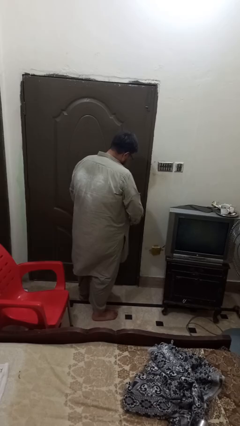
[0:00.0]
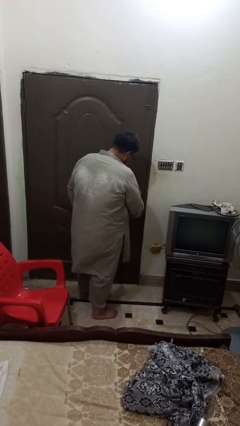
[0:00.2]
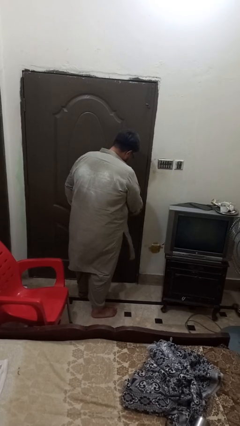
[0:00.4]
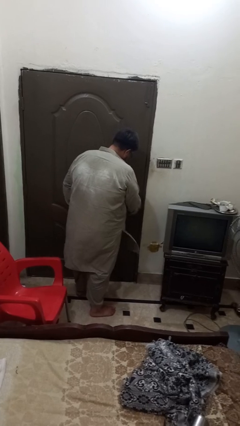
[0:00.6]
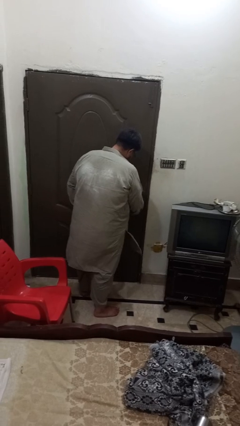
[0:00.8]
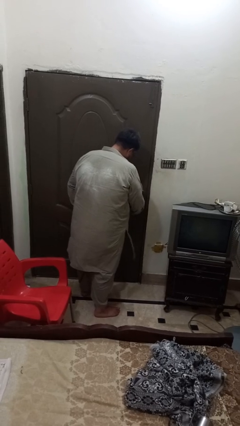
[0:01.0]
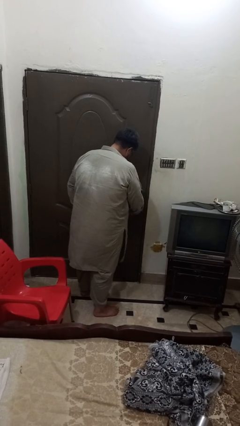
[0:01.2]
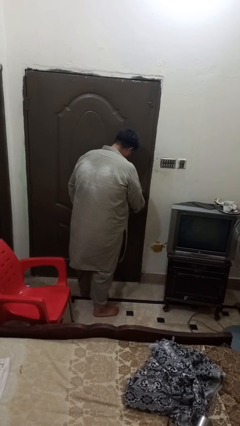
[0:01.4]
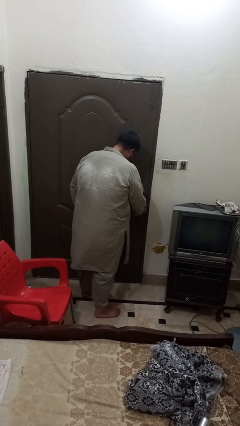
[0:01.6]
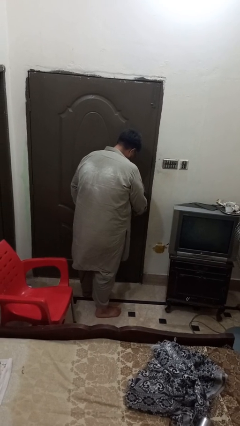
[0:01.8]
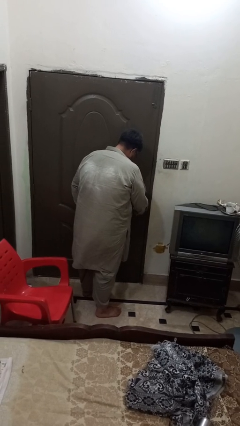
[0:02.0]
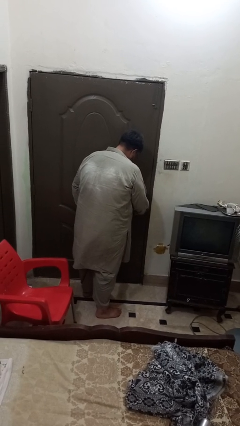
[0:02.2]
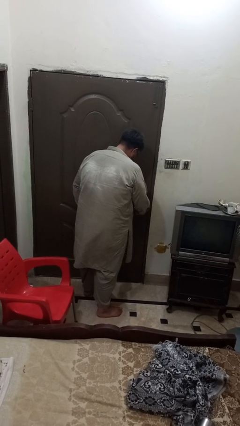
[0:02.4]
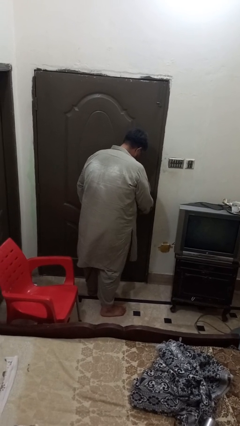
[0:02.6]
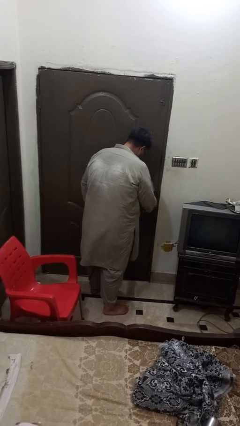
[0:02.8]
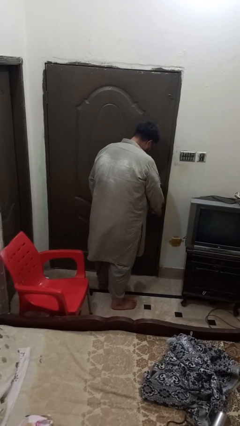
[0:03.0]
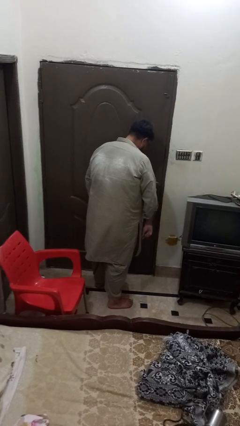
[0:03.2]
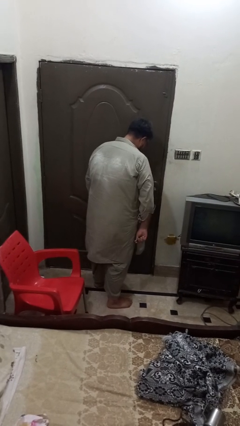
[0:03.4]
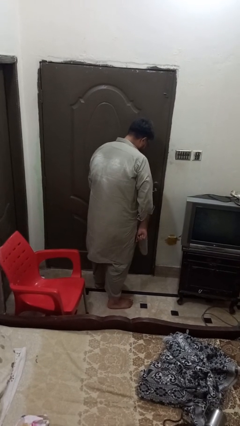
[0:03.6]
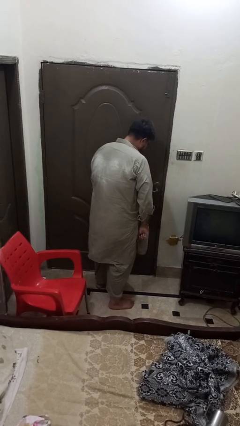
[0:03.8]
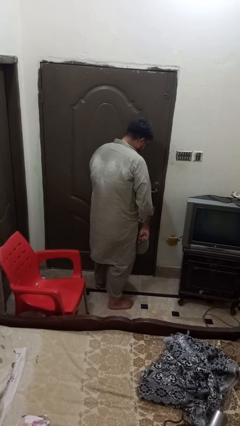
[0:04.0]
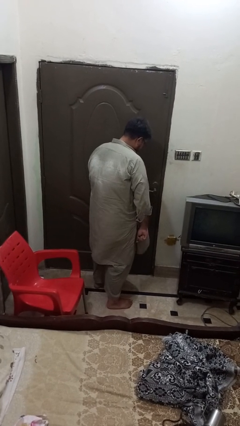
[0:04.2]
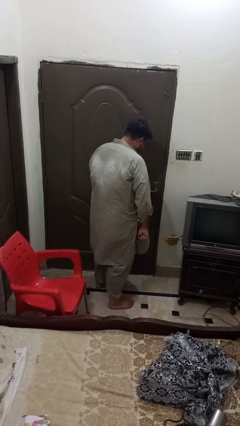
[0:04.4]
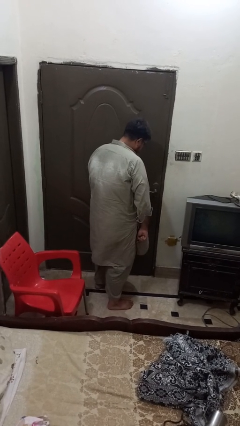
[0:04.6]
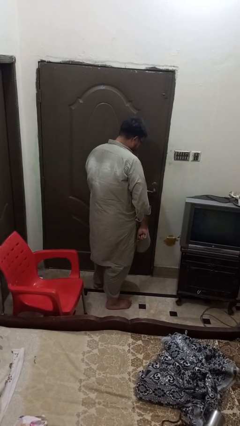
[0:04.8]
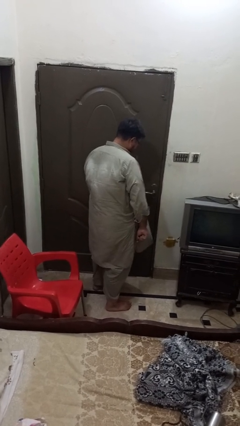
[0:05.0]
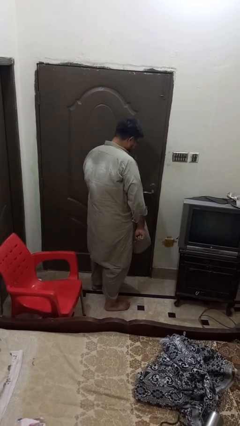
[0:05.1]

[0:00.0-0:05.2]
person locks door with keys

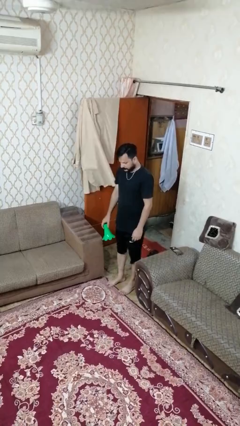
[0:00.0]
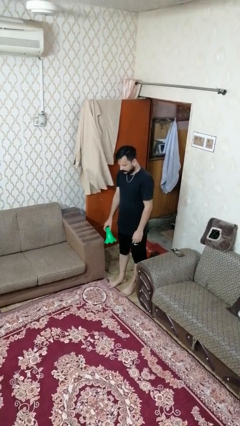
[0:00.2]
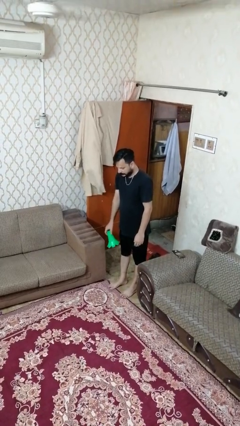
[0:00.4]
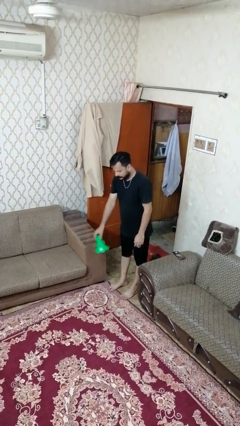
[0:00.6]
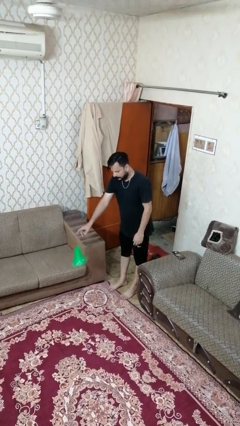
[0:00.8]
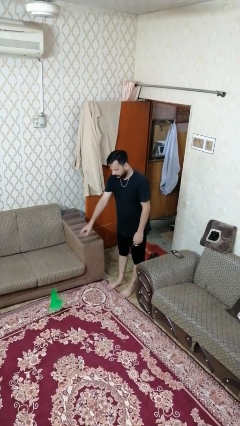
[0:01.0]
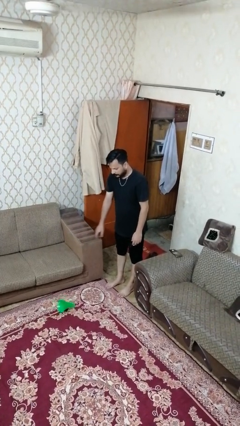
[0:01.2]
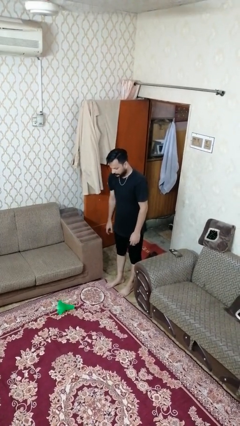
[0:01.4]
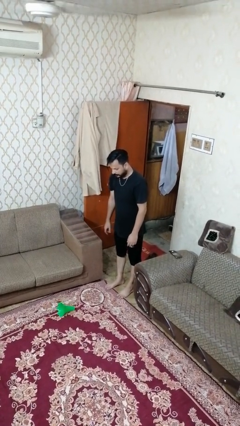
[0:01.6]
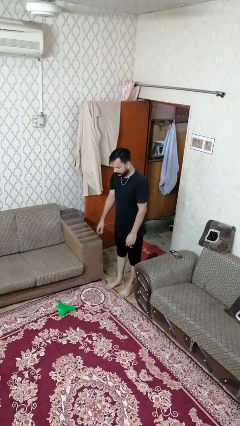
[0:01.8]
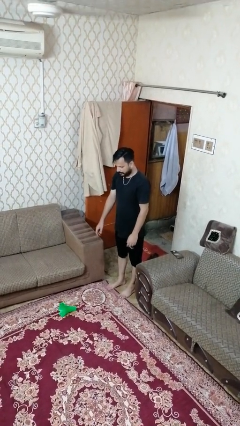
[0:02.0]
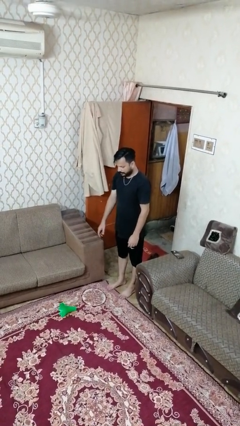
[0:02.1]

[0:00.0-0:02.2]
person throws object to ground

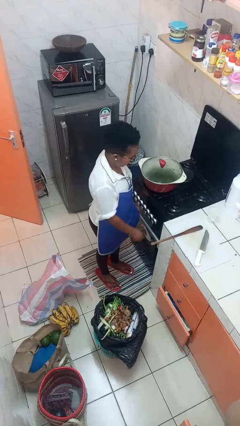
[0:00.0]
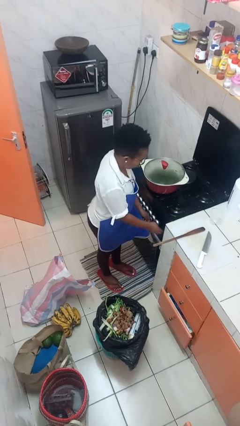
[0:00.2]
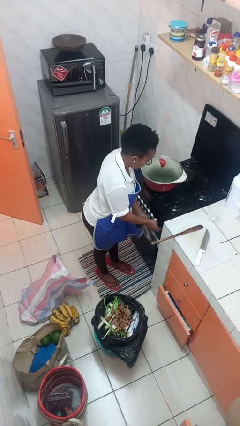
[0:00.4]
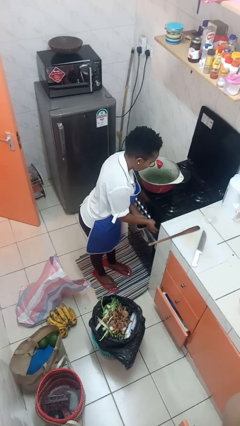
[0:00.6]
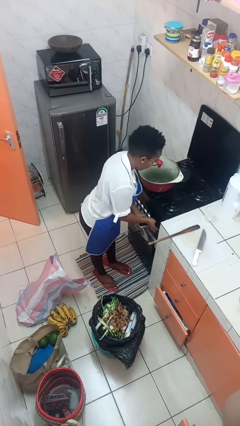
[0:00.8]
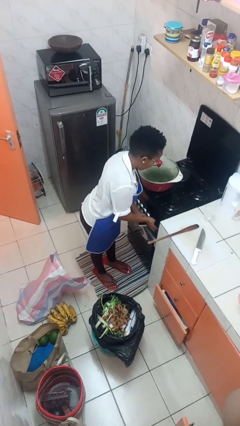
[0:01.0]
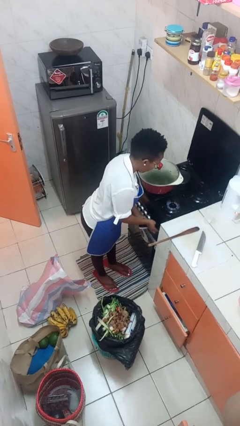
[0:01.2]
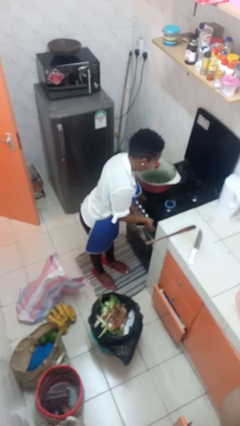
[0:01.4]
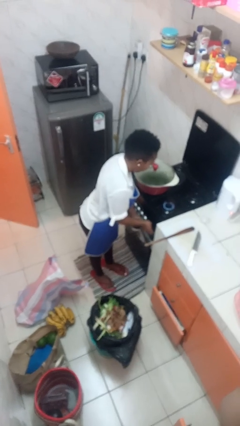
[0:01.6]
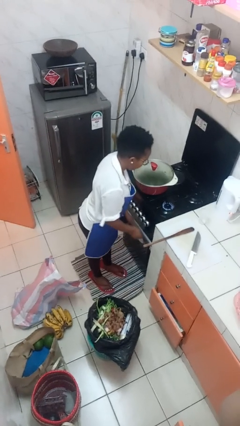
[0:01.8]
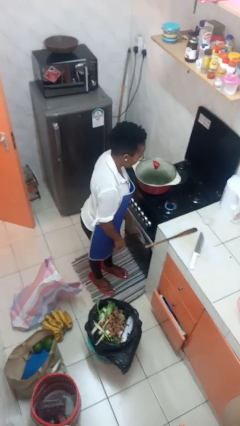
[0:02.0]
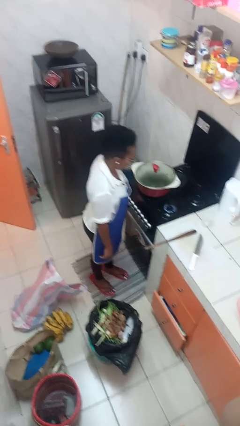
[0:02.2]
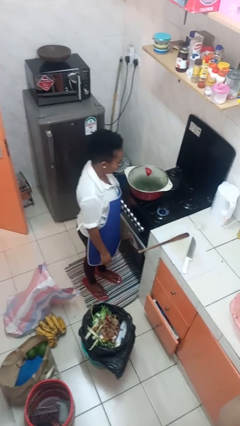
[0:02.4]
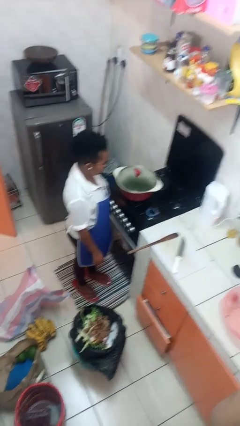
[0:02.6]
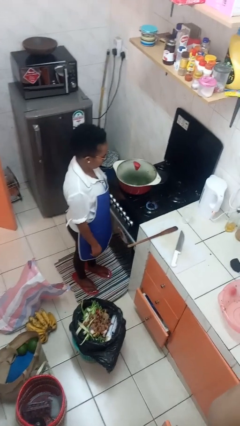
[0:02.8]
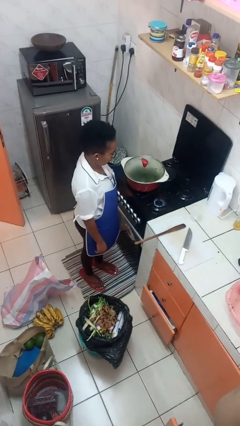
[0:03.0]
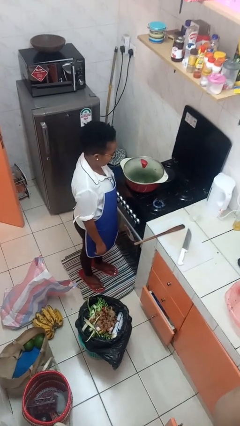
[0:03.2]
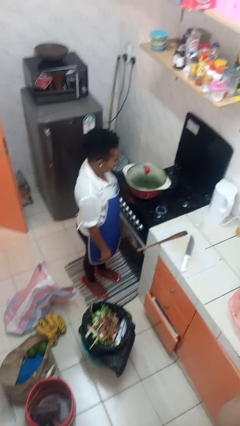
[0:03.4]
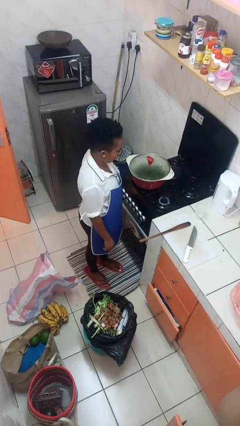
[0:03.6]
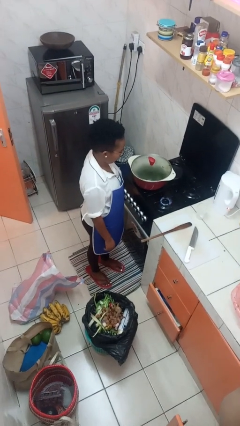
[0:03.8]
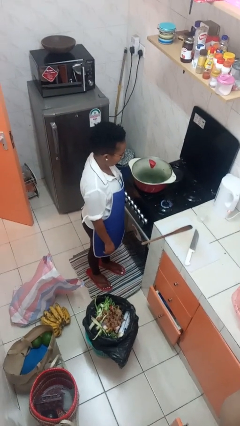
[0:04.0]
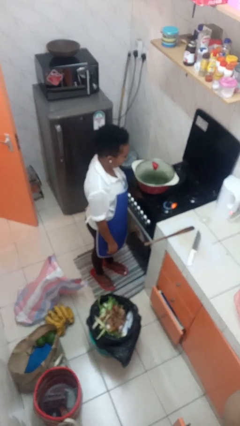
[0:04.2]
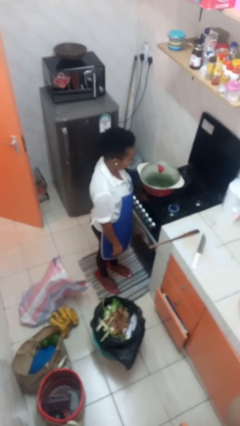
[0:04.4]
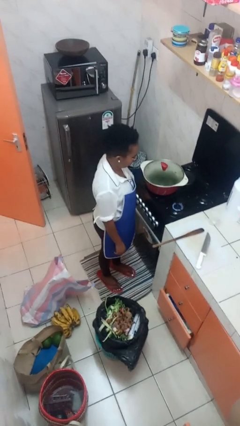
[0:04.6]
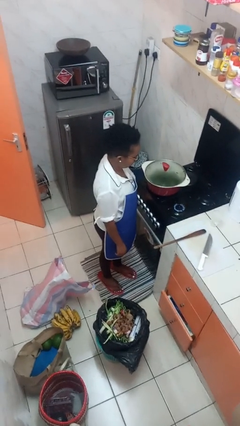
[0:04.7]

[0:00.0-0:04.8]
person turns on stovetop

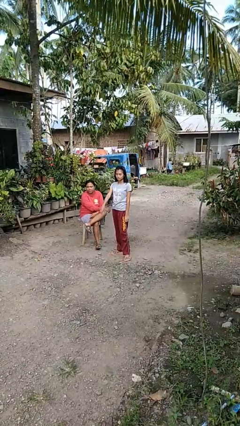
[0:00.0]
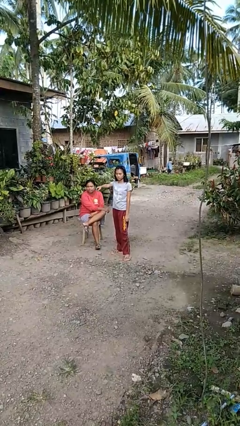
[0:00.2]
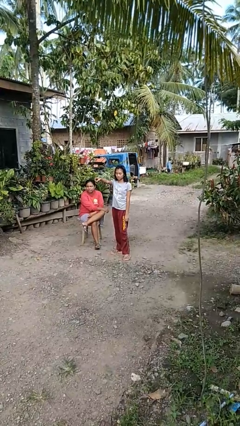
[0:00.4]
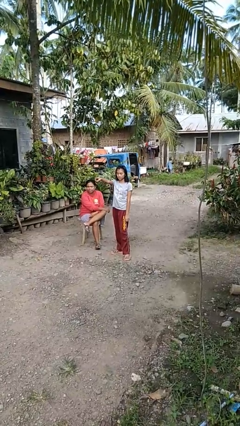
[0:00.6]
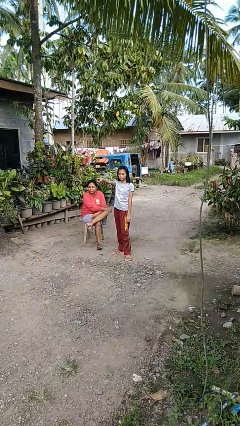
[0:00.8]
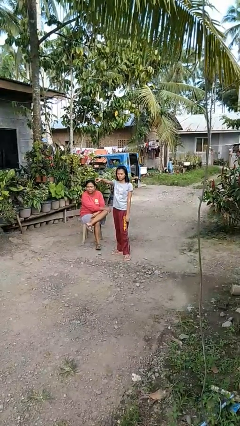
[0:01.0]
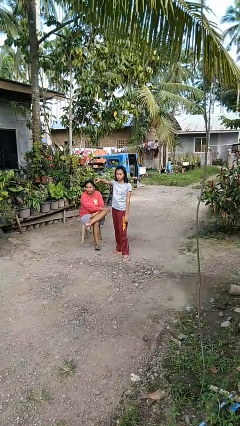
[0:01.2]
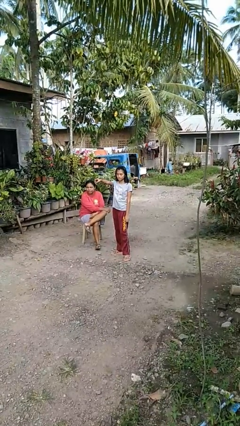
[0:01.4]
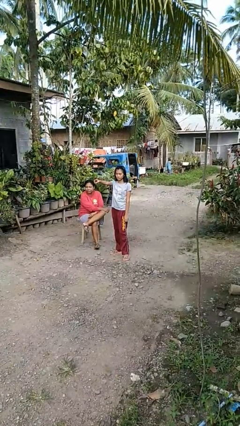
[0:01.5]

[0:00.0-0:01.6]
person points at person

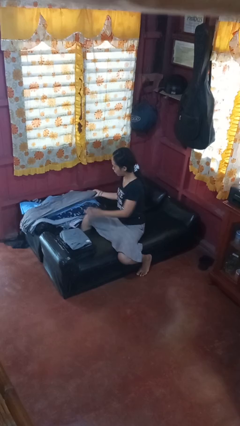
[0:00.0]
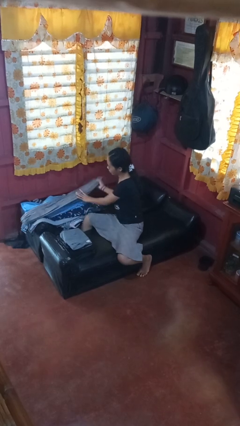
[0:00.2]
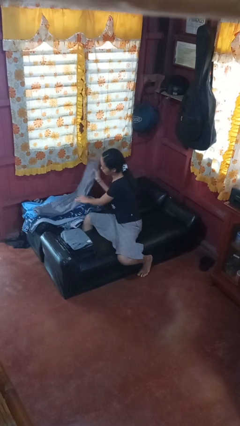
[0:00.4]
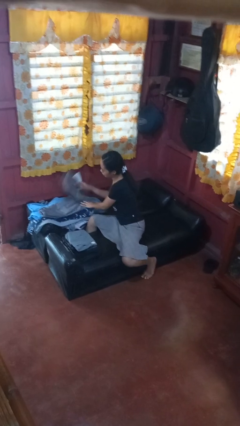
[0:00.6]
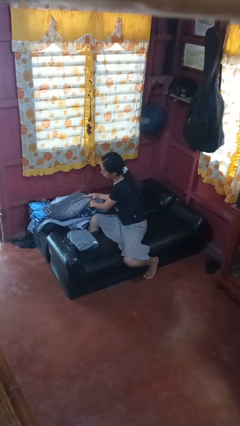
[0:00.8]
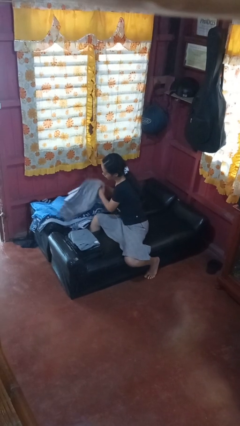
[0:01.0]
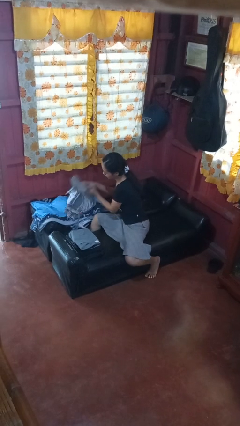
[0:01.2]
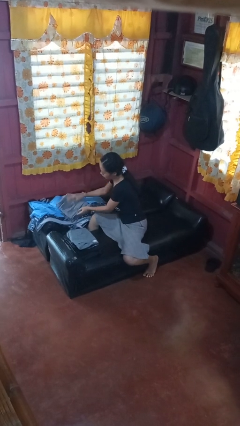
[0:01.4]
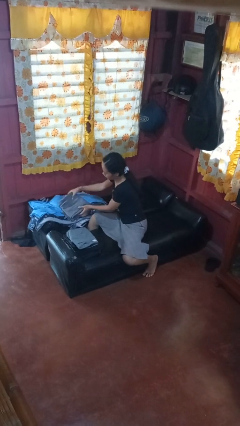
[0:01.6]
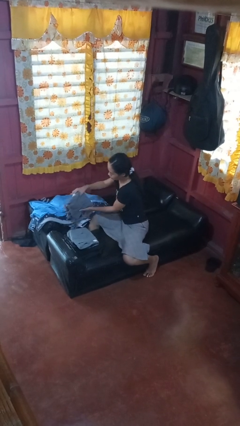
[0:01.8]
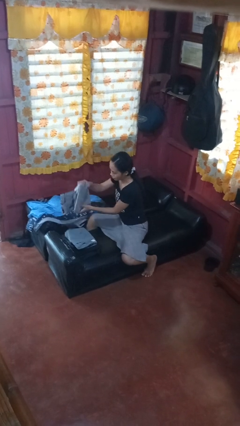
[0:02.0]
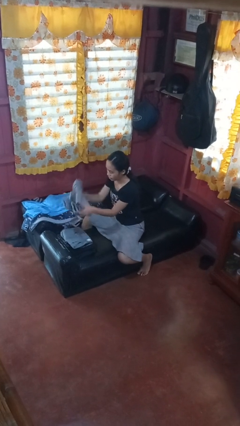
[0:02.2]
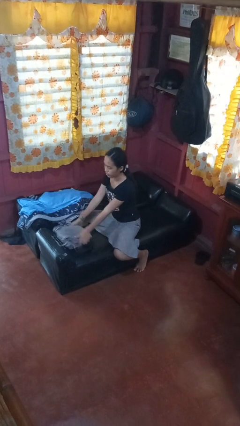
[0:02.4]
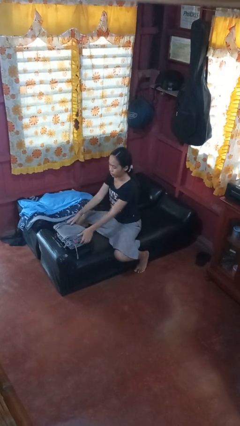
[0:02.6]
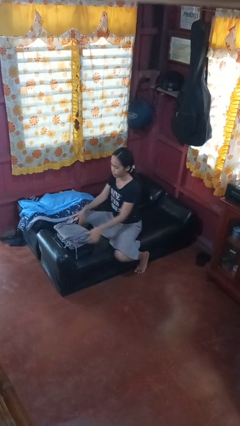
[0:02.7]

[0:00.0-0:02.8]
person folds pants

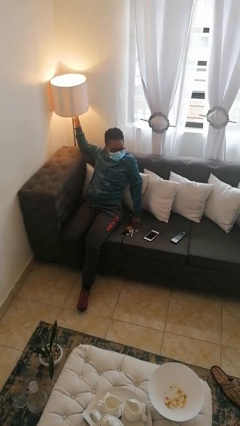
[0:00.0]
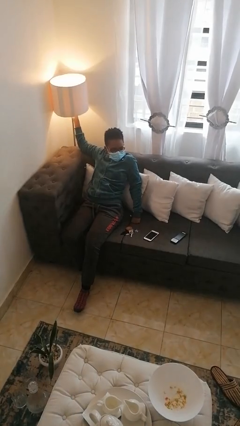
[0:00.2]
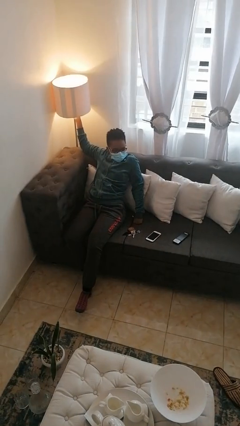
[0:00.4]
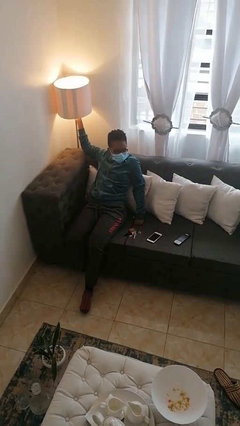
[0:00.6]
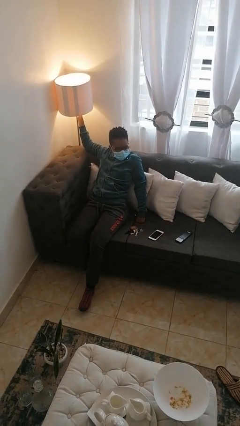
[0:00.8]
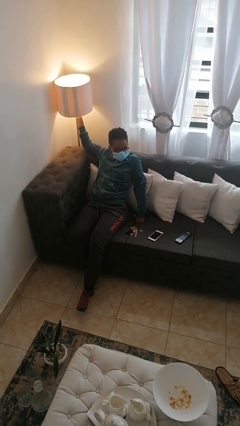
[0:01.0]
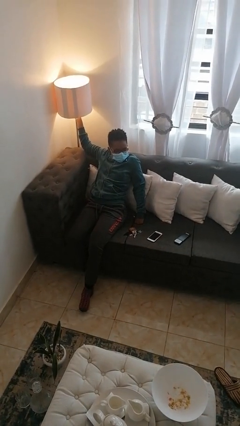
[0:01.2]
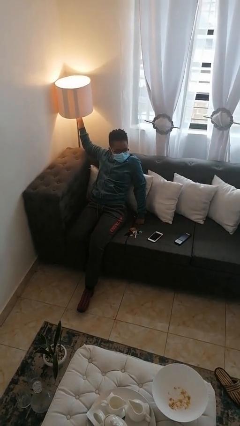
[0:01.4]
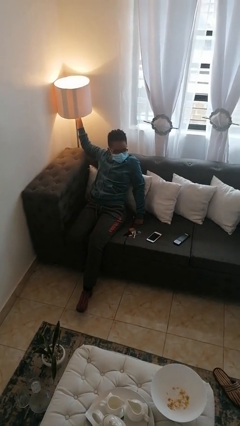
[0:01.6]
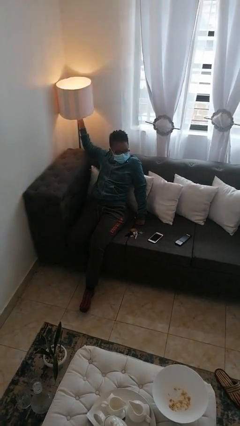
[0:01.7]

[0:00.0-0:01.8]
person turns on lamp
